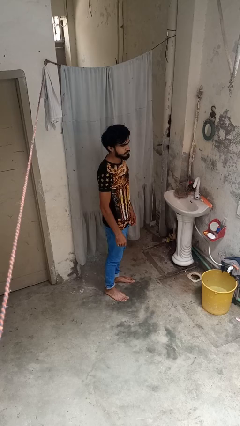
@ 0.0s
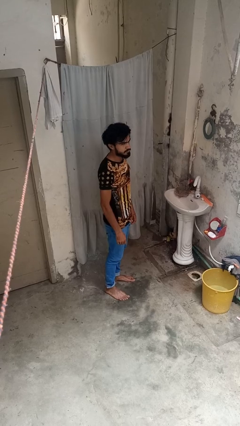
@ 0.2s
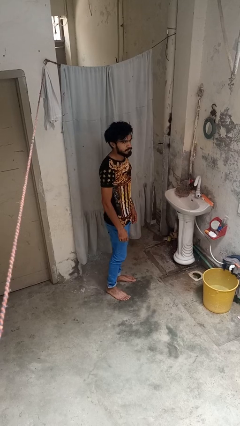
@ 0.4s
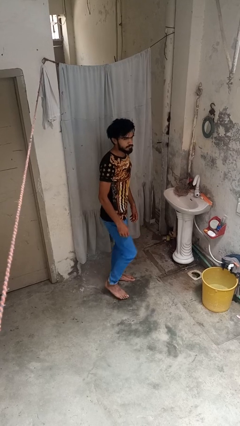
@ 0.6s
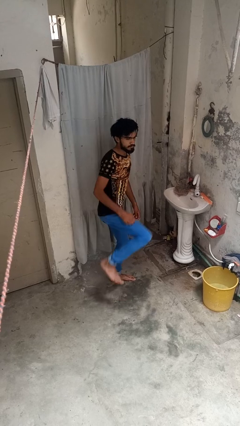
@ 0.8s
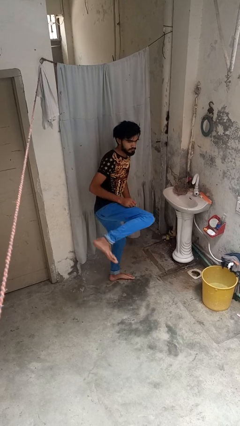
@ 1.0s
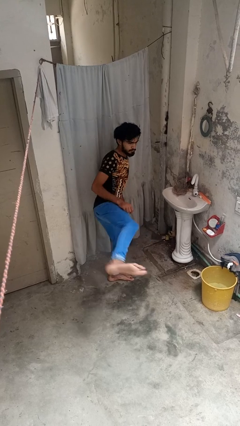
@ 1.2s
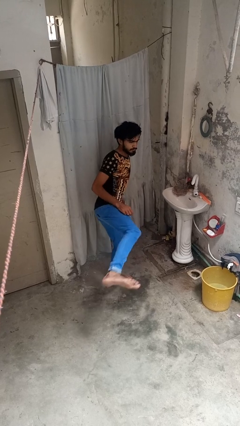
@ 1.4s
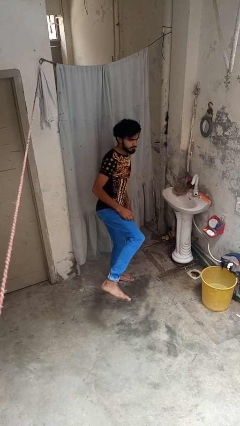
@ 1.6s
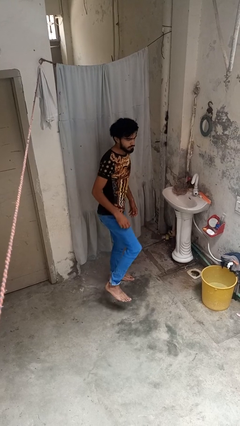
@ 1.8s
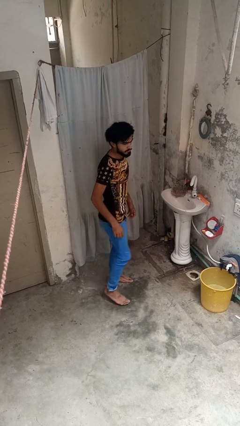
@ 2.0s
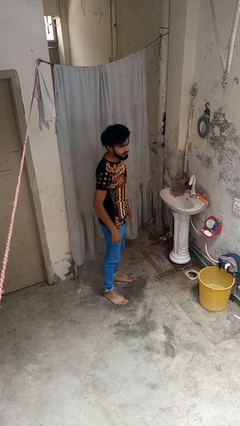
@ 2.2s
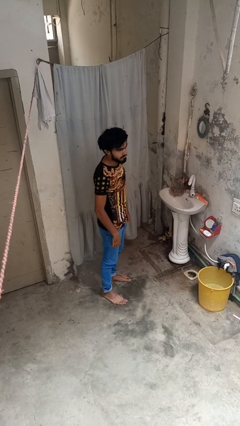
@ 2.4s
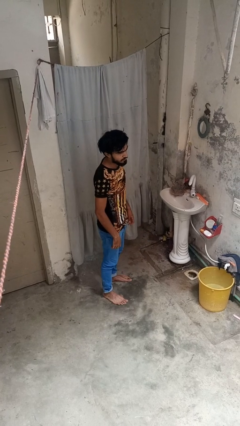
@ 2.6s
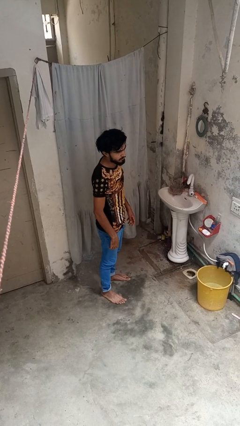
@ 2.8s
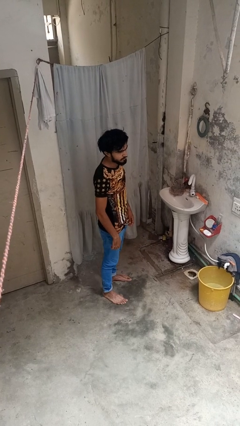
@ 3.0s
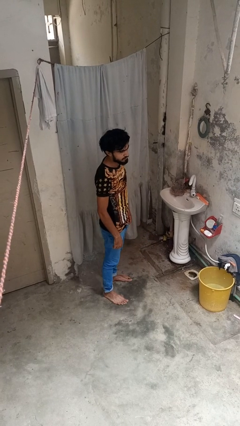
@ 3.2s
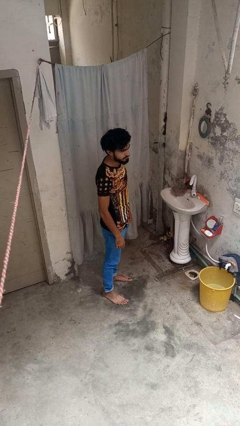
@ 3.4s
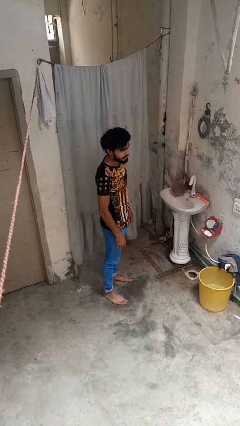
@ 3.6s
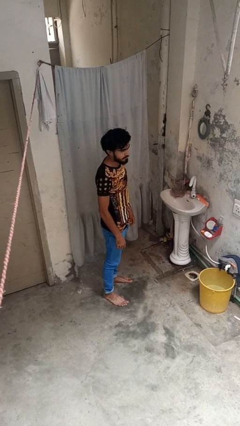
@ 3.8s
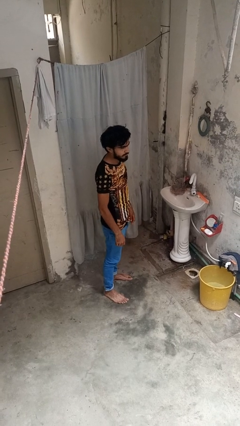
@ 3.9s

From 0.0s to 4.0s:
person karate kicks

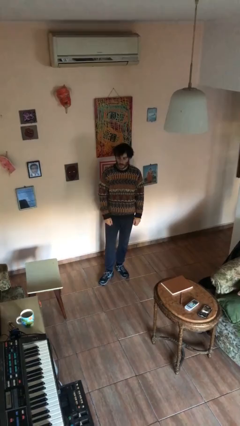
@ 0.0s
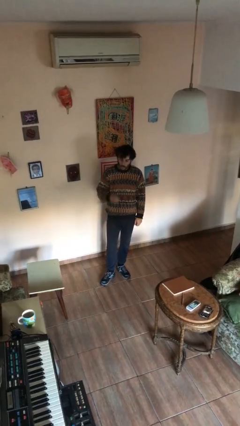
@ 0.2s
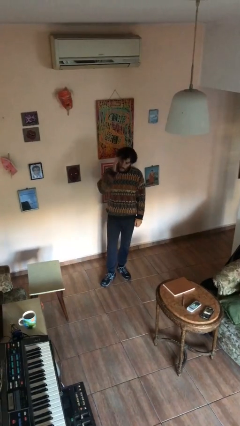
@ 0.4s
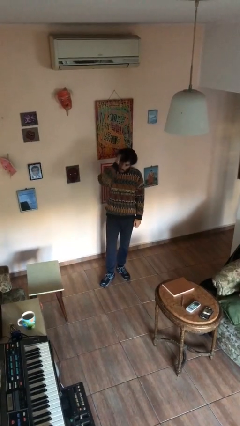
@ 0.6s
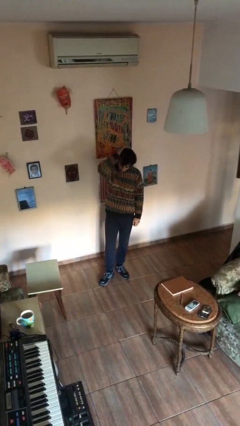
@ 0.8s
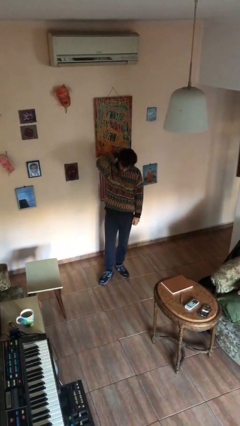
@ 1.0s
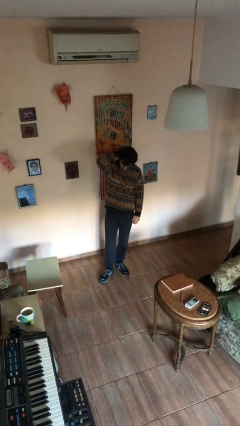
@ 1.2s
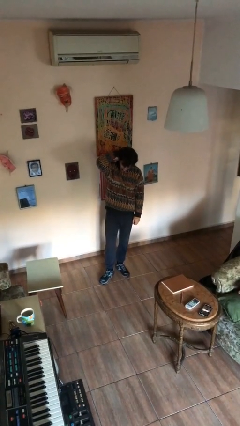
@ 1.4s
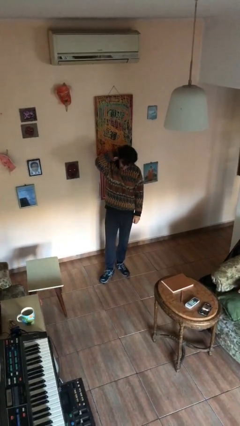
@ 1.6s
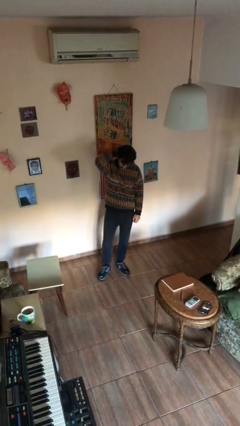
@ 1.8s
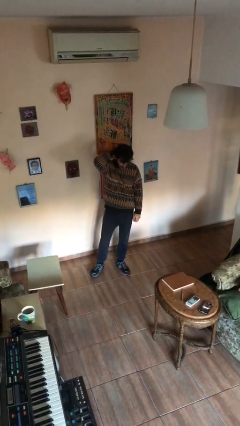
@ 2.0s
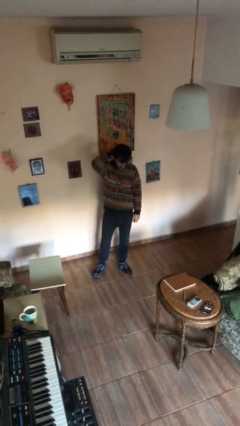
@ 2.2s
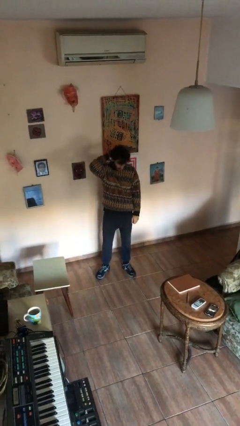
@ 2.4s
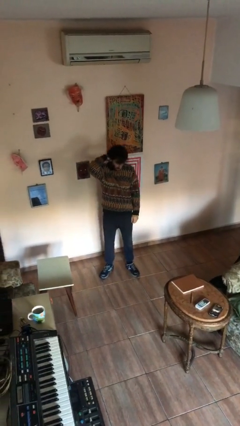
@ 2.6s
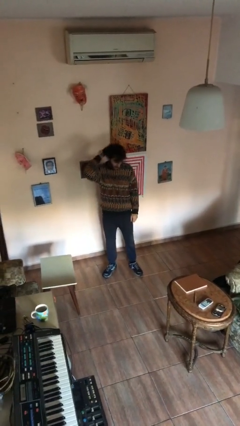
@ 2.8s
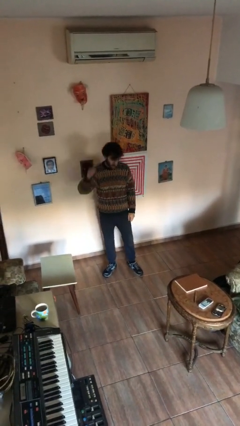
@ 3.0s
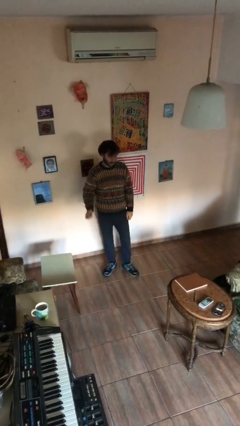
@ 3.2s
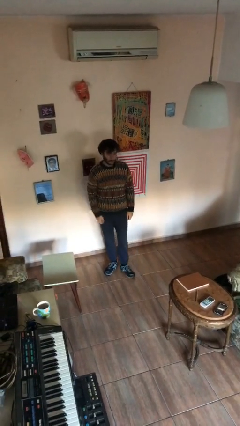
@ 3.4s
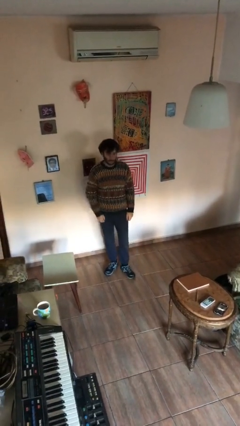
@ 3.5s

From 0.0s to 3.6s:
person scratches face

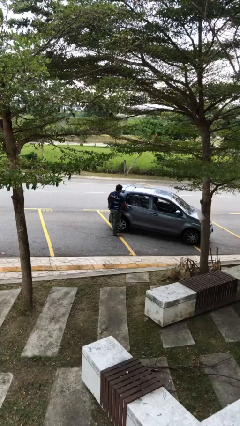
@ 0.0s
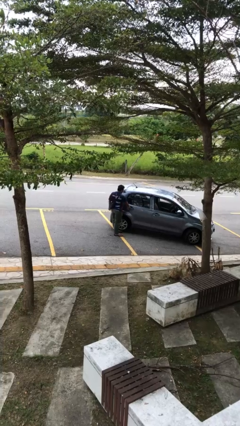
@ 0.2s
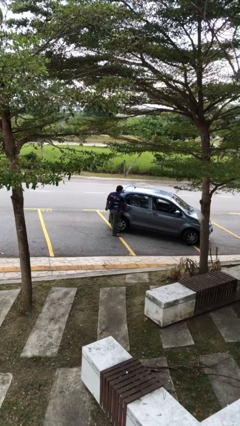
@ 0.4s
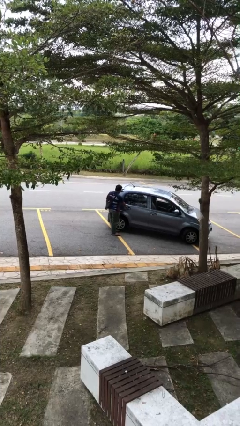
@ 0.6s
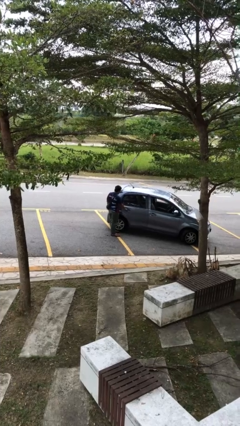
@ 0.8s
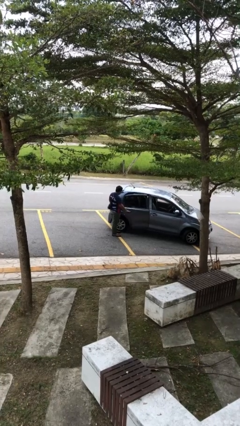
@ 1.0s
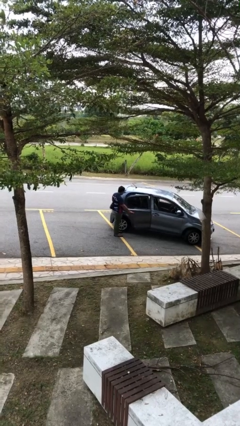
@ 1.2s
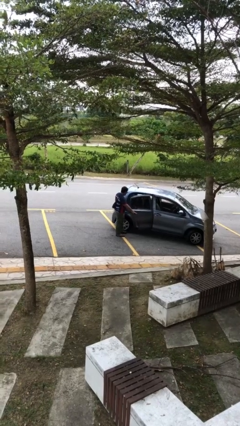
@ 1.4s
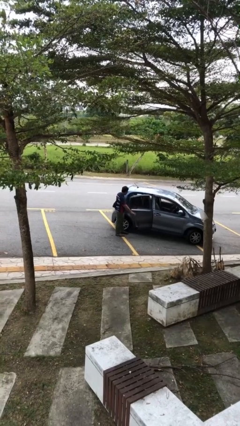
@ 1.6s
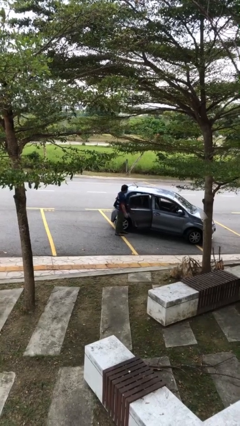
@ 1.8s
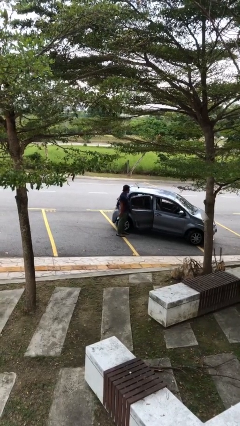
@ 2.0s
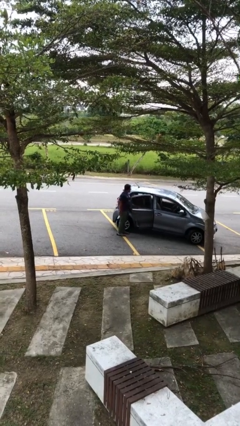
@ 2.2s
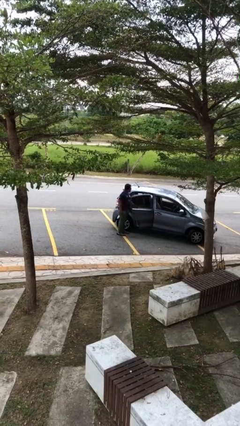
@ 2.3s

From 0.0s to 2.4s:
person opens car door

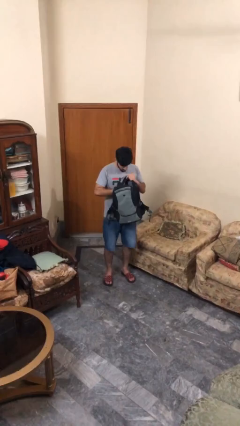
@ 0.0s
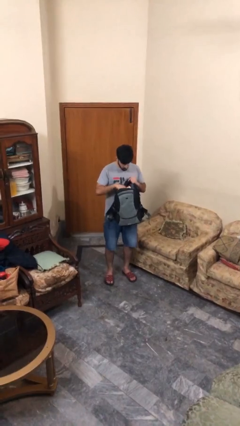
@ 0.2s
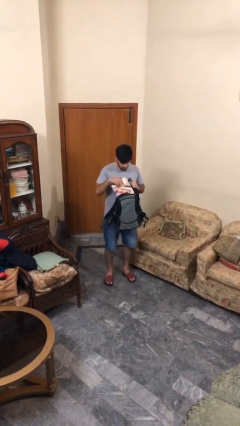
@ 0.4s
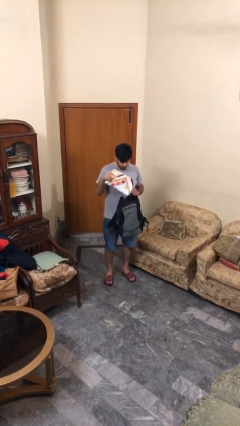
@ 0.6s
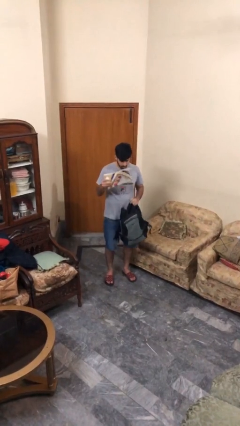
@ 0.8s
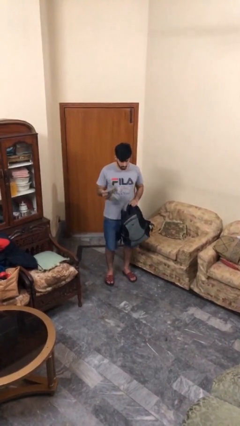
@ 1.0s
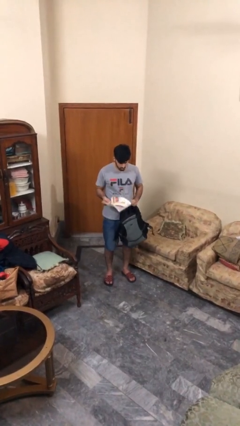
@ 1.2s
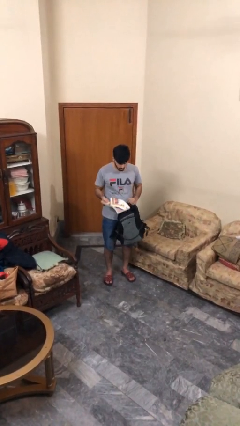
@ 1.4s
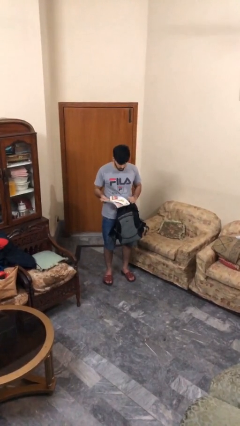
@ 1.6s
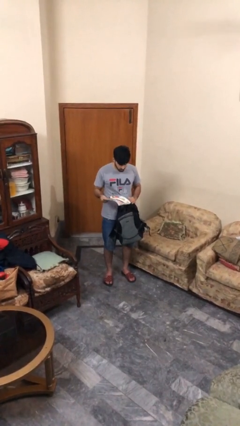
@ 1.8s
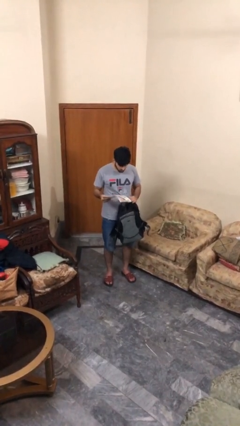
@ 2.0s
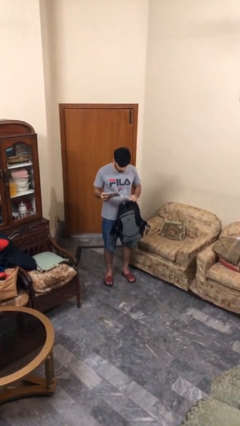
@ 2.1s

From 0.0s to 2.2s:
person takes object from backpack

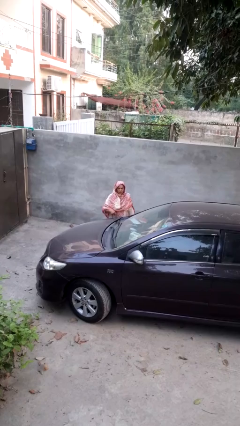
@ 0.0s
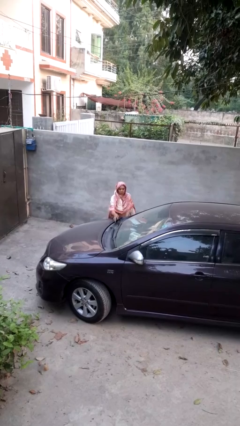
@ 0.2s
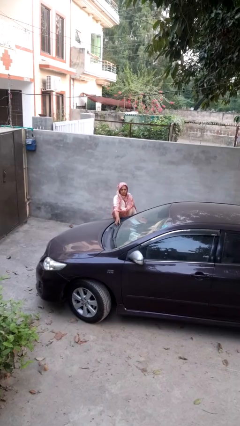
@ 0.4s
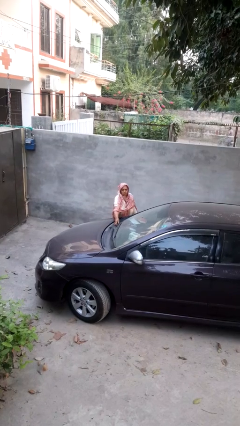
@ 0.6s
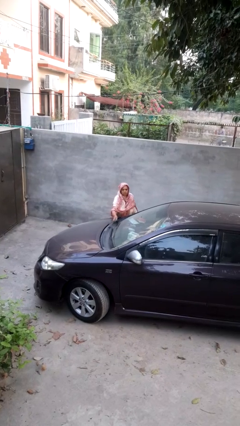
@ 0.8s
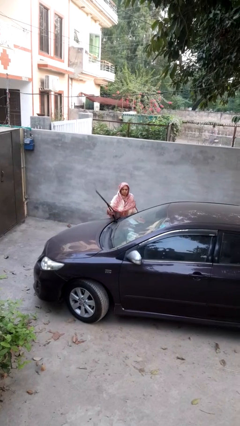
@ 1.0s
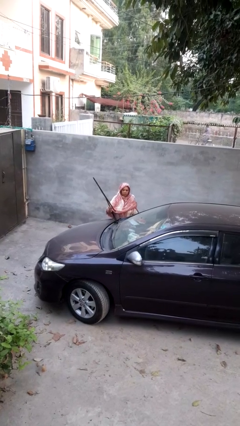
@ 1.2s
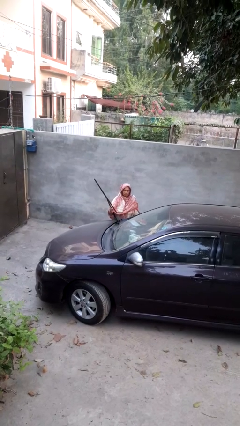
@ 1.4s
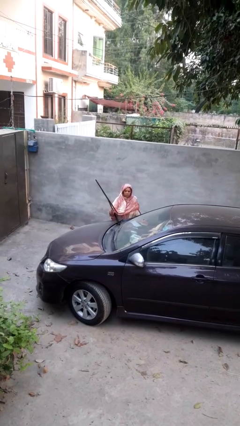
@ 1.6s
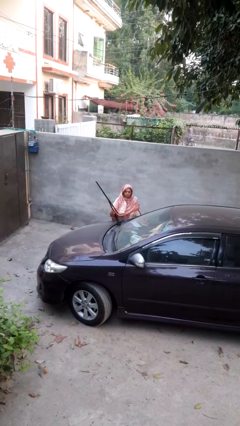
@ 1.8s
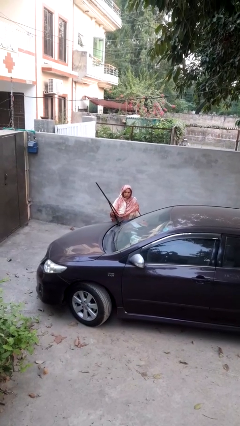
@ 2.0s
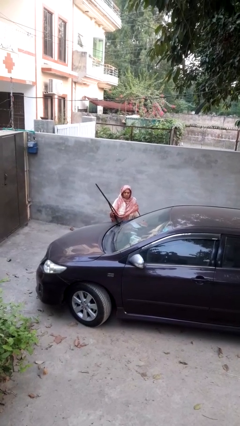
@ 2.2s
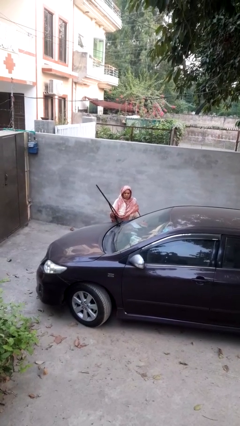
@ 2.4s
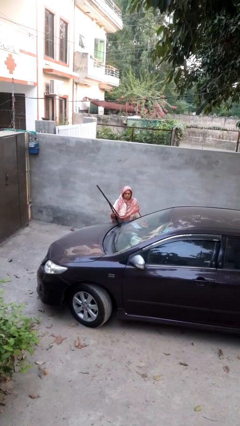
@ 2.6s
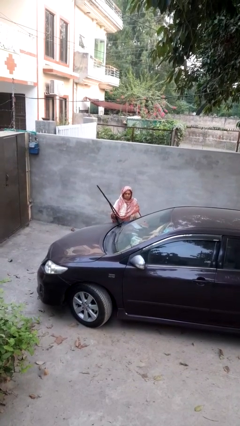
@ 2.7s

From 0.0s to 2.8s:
person flips up car wipers

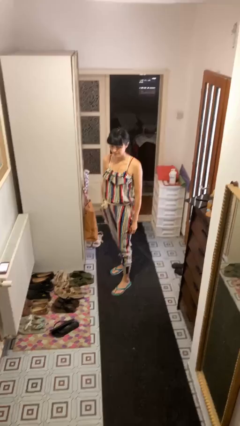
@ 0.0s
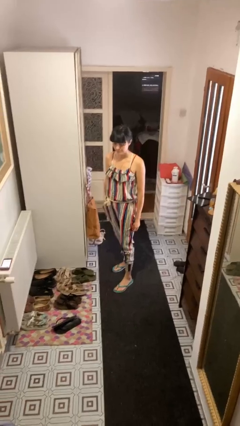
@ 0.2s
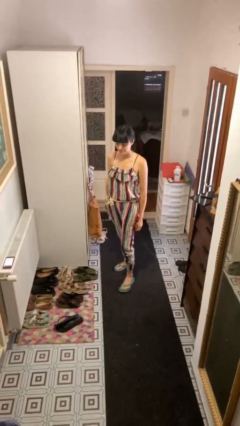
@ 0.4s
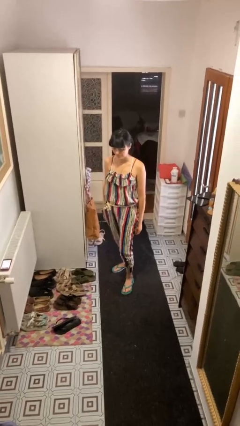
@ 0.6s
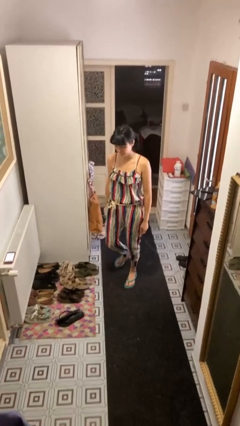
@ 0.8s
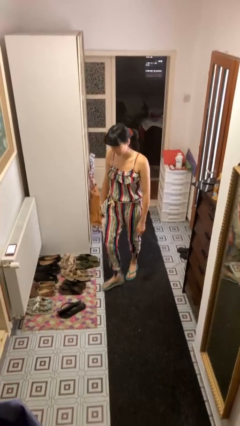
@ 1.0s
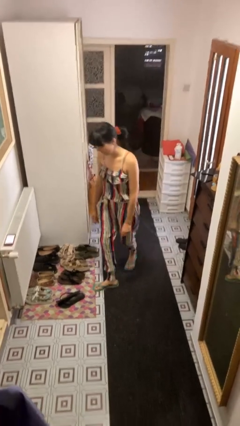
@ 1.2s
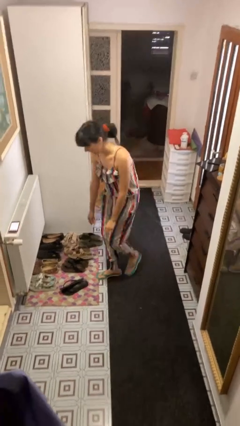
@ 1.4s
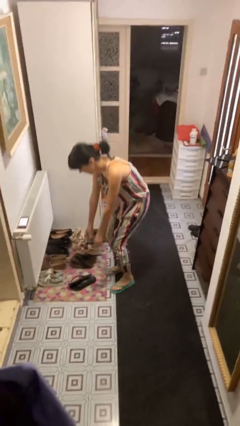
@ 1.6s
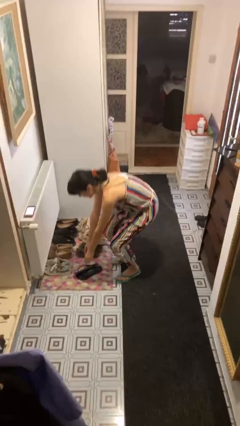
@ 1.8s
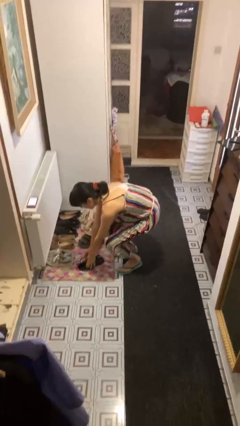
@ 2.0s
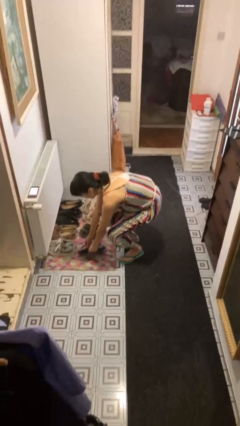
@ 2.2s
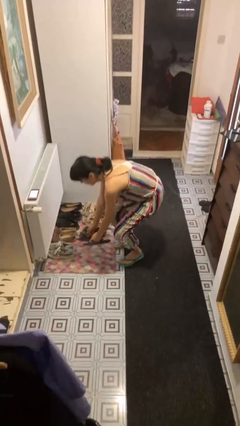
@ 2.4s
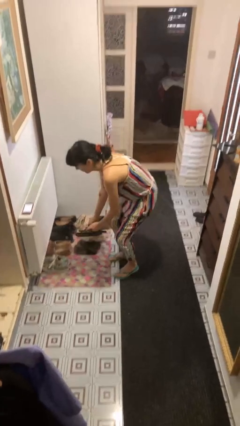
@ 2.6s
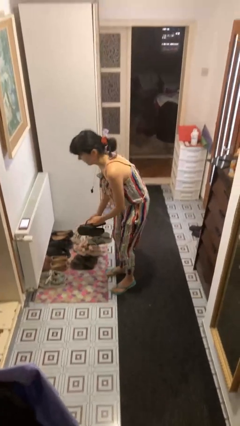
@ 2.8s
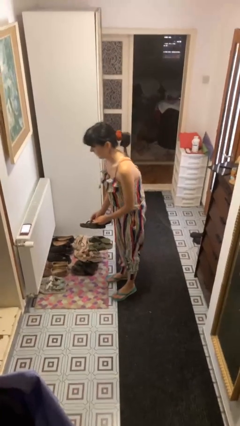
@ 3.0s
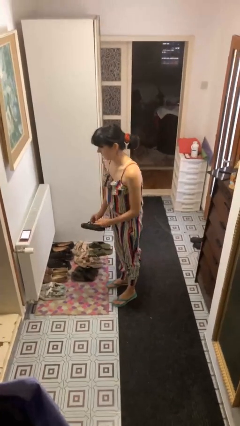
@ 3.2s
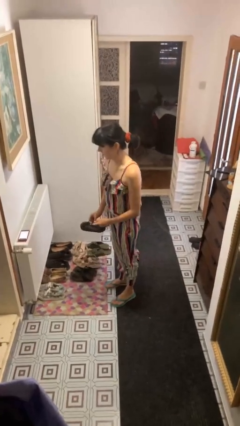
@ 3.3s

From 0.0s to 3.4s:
person picks up object from floor
